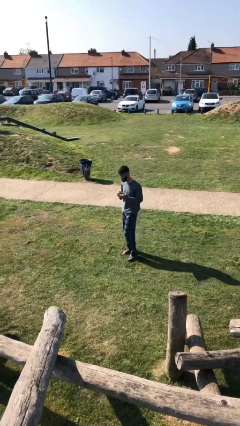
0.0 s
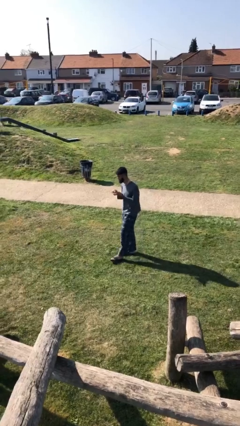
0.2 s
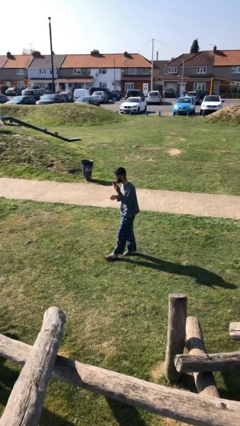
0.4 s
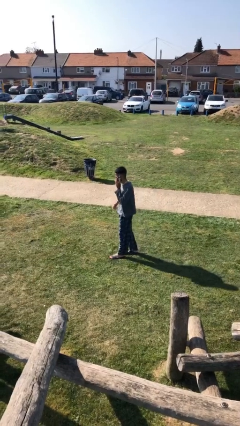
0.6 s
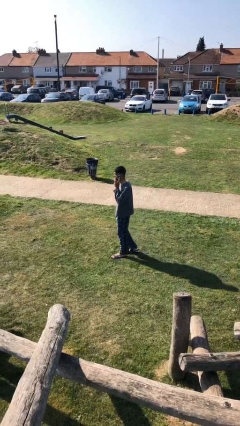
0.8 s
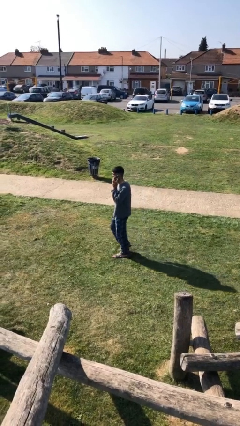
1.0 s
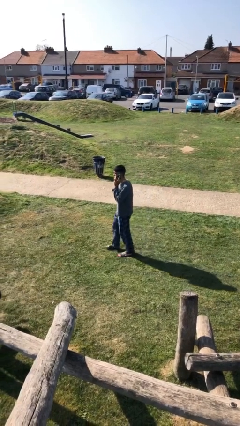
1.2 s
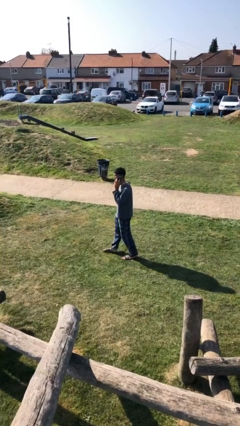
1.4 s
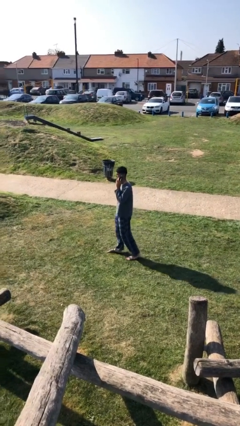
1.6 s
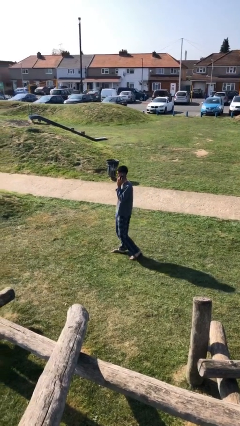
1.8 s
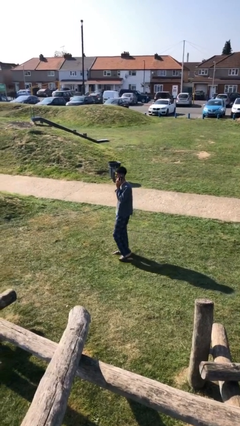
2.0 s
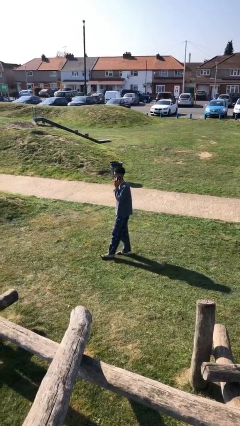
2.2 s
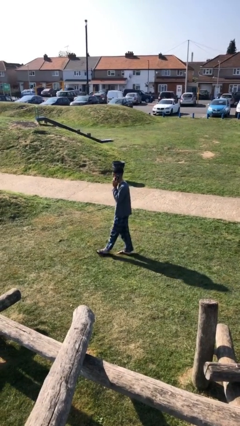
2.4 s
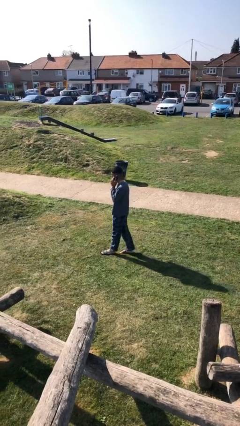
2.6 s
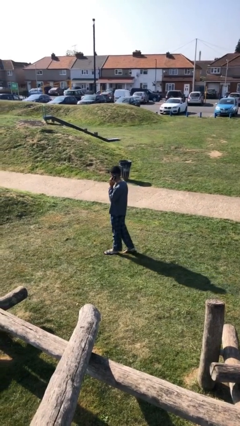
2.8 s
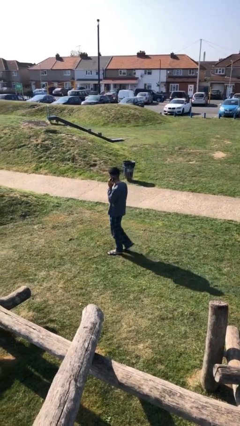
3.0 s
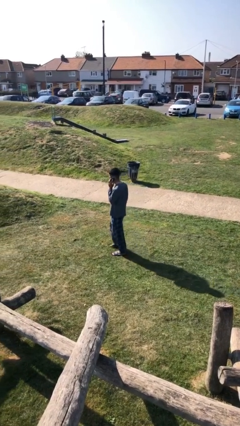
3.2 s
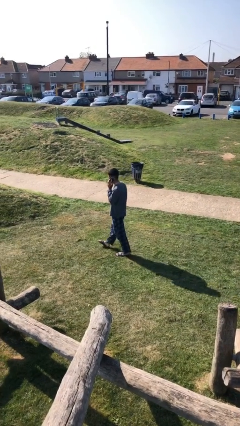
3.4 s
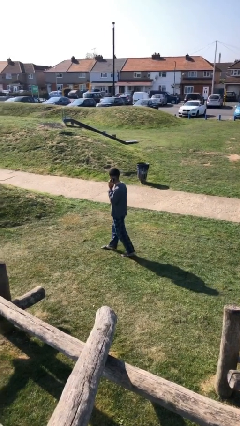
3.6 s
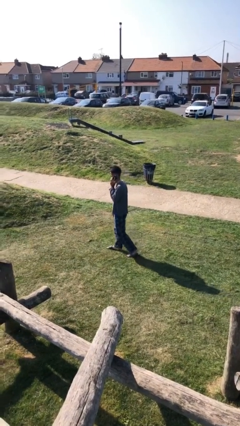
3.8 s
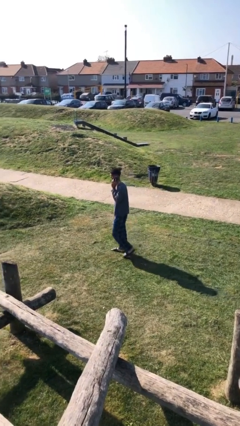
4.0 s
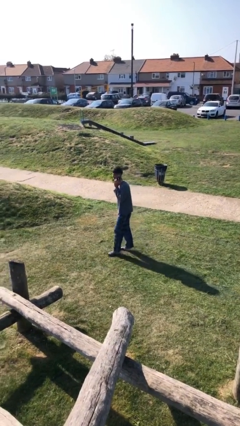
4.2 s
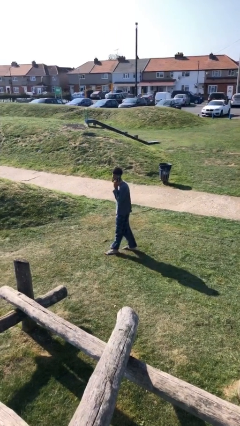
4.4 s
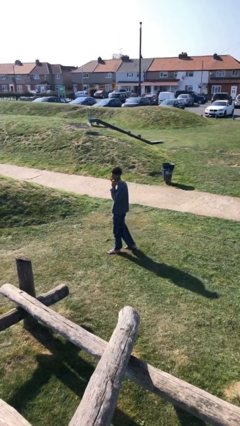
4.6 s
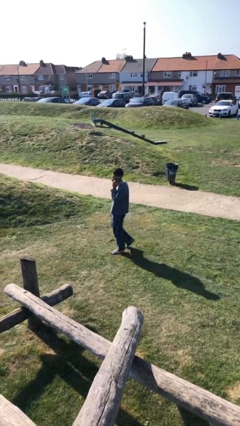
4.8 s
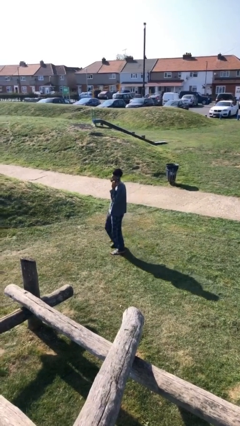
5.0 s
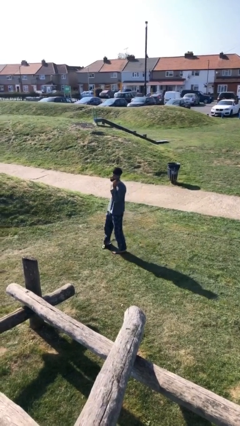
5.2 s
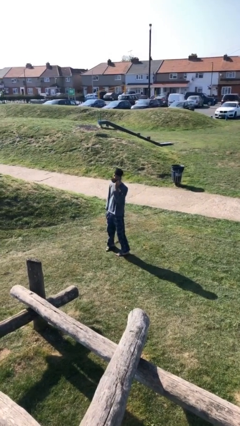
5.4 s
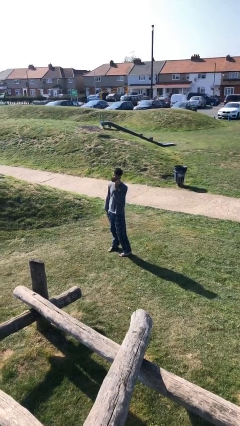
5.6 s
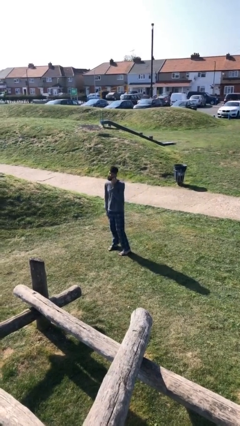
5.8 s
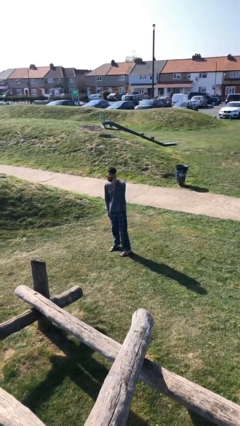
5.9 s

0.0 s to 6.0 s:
person talks on phone

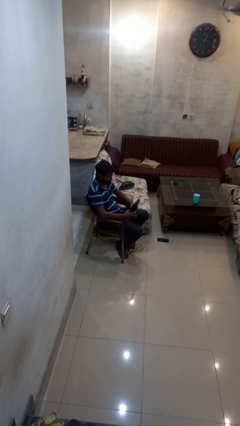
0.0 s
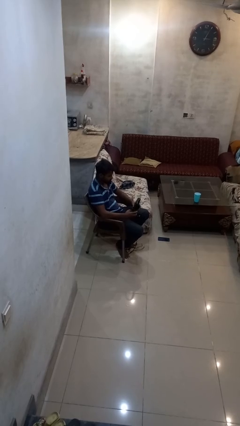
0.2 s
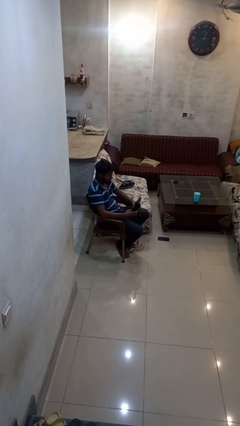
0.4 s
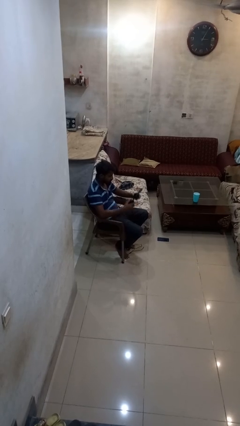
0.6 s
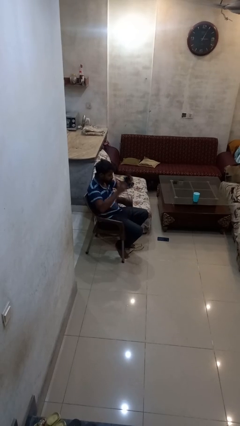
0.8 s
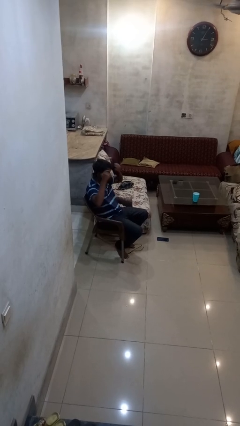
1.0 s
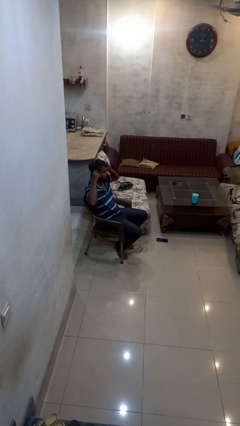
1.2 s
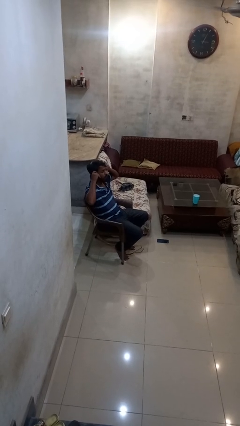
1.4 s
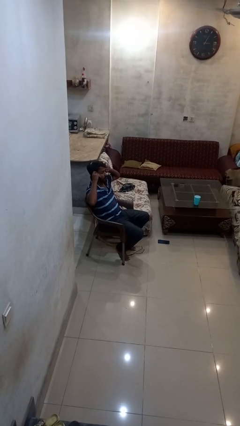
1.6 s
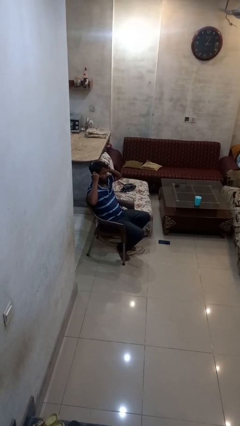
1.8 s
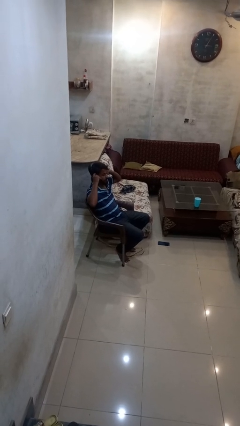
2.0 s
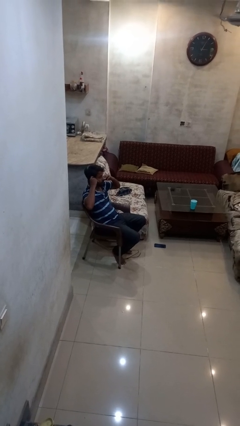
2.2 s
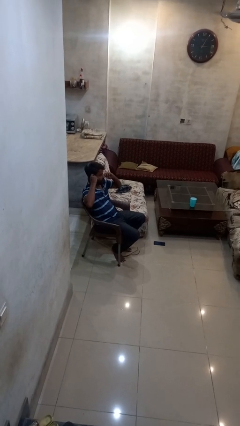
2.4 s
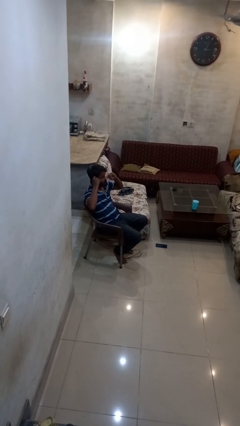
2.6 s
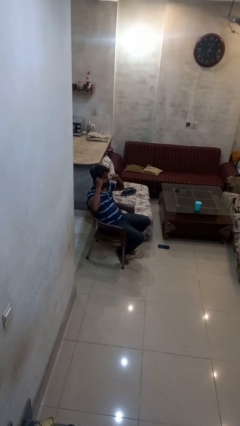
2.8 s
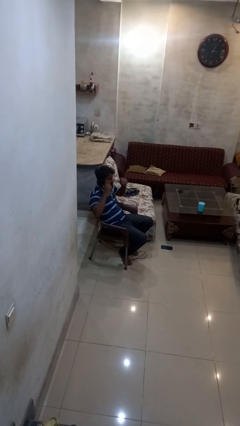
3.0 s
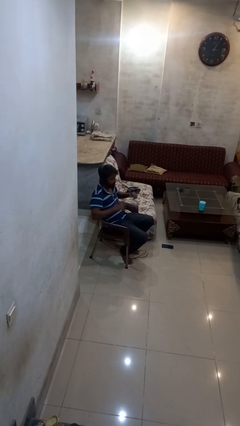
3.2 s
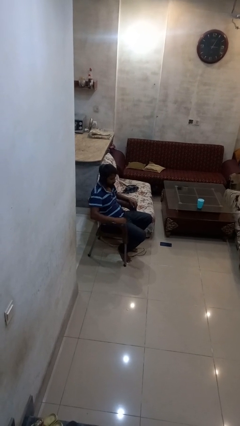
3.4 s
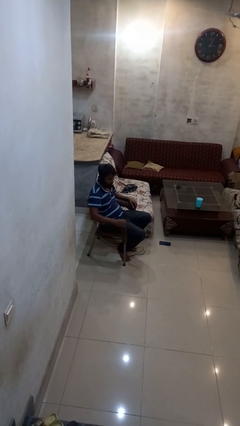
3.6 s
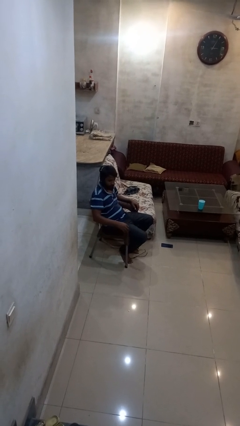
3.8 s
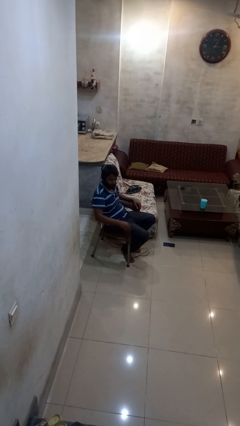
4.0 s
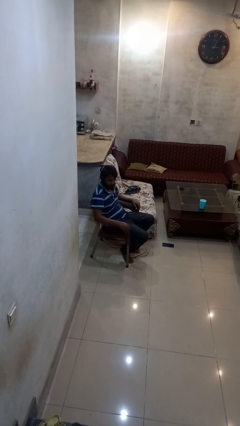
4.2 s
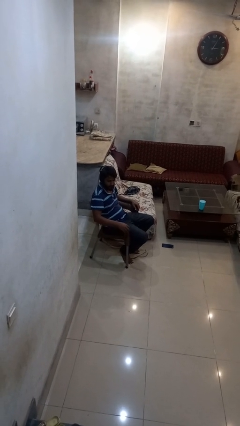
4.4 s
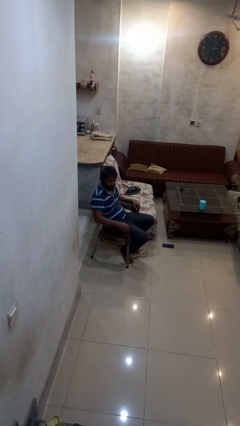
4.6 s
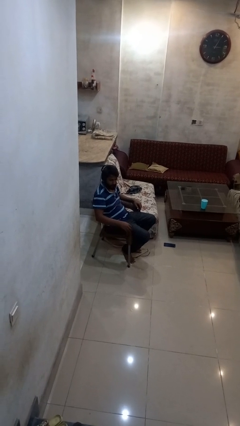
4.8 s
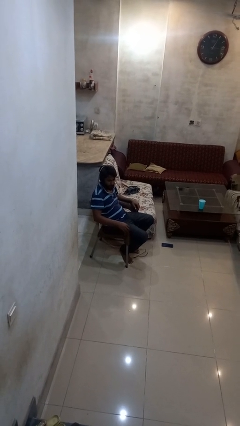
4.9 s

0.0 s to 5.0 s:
person puts on headphones

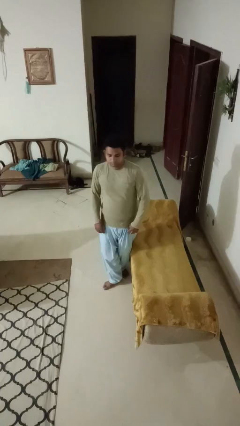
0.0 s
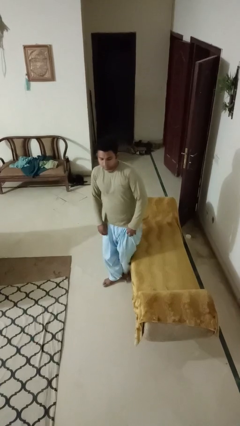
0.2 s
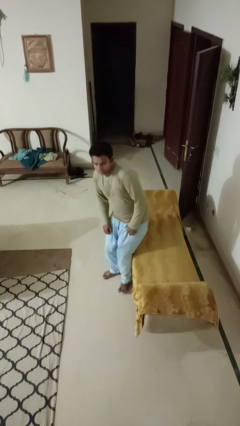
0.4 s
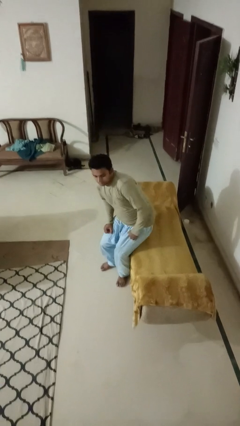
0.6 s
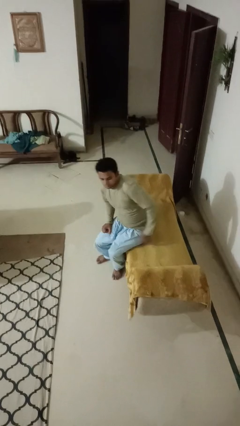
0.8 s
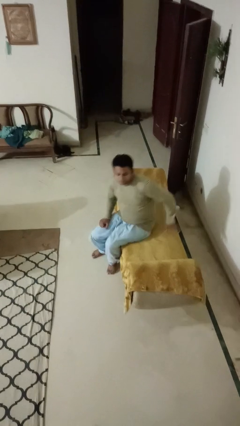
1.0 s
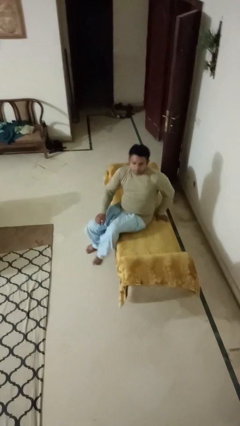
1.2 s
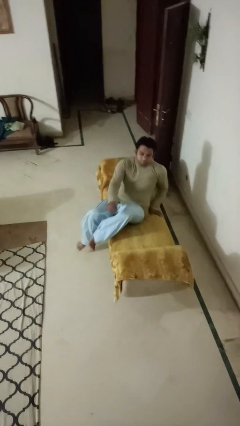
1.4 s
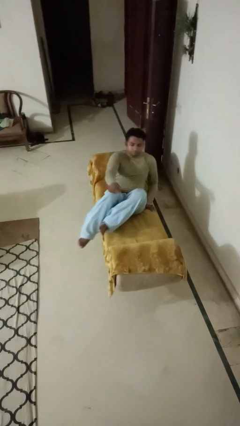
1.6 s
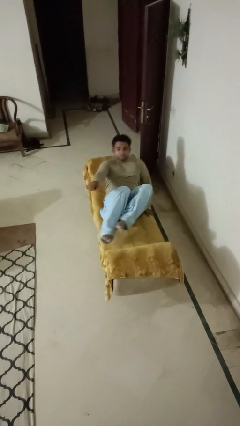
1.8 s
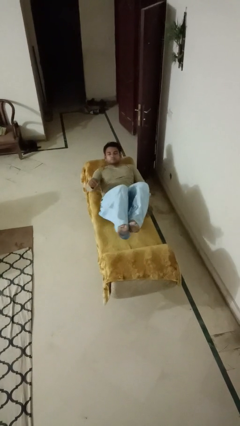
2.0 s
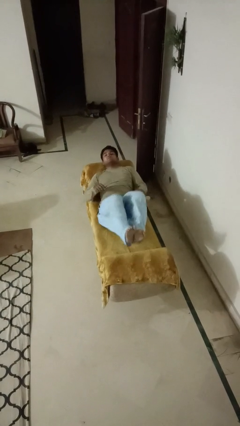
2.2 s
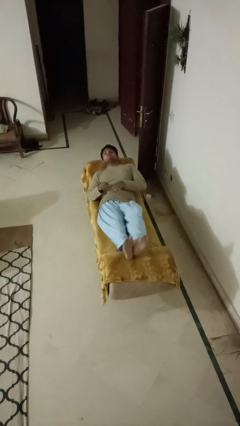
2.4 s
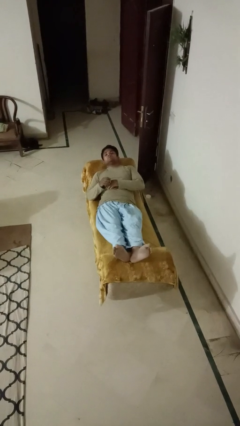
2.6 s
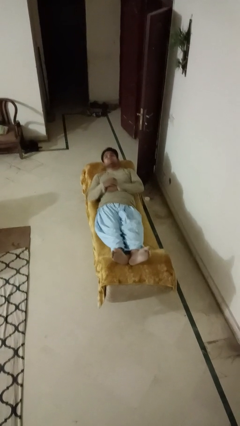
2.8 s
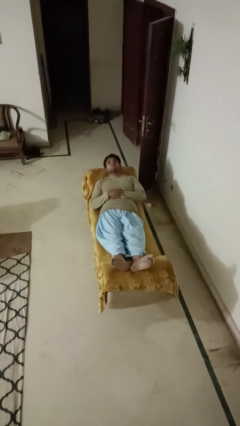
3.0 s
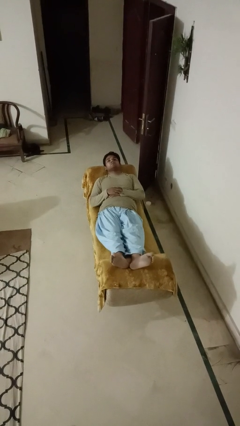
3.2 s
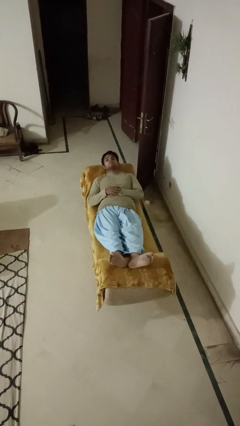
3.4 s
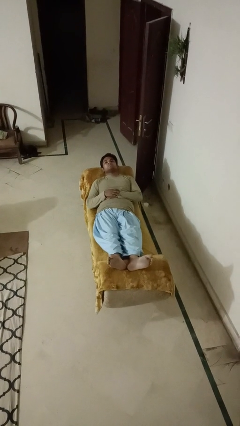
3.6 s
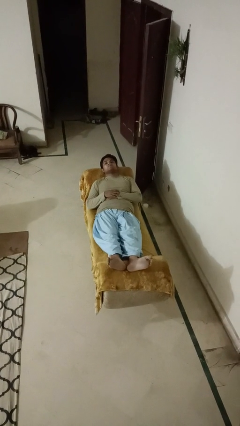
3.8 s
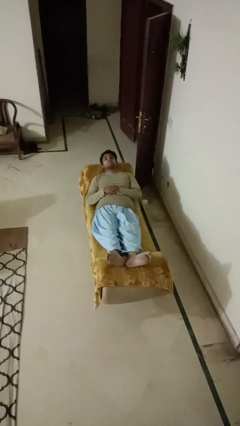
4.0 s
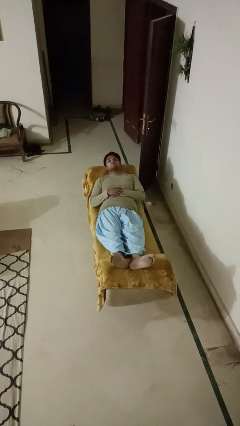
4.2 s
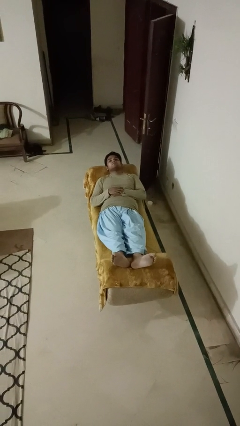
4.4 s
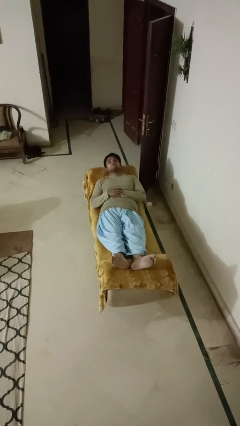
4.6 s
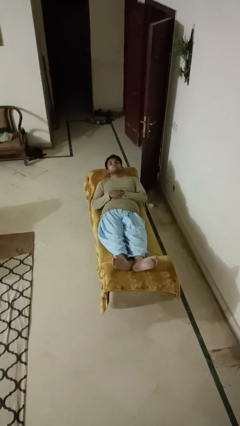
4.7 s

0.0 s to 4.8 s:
person lies down on couch

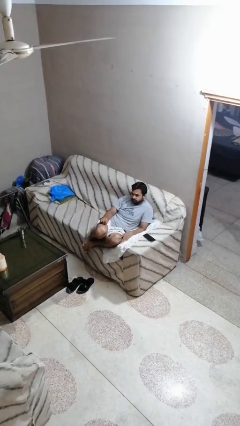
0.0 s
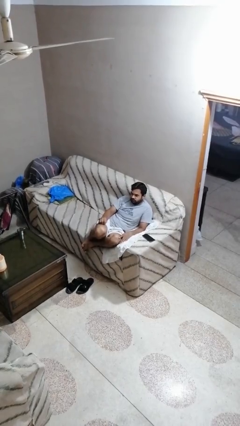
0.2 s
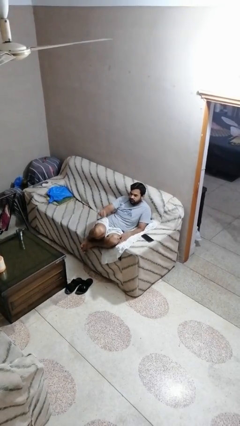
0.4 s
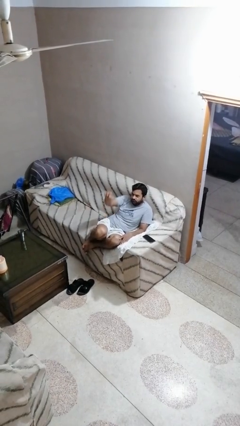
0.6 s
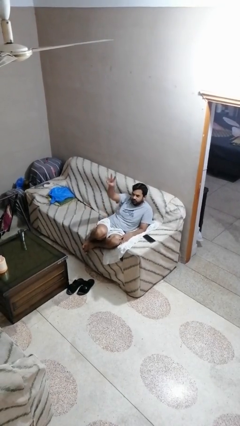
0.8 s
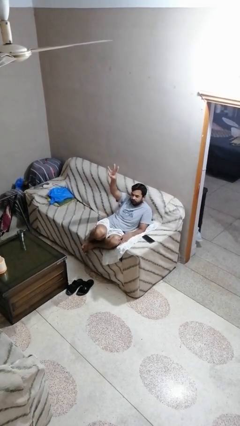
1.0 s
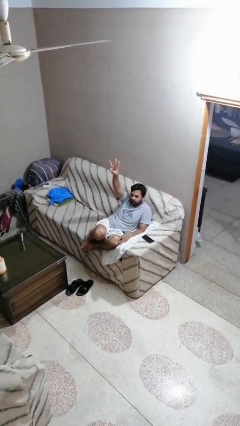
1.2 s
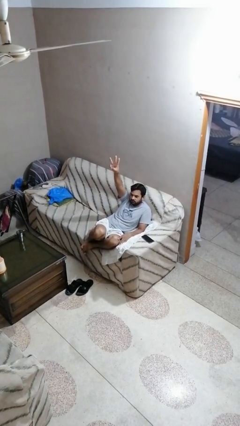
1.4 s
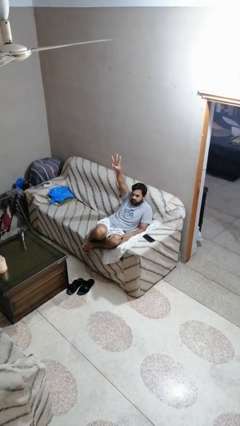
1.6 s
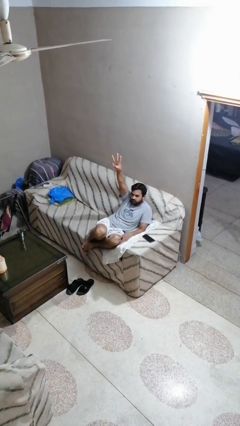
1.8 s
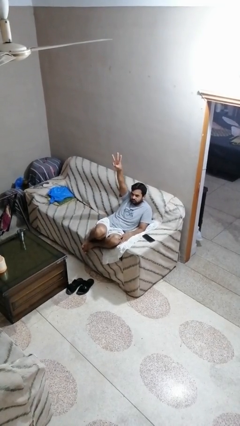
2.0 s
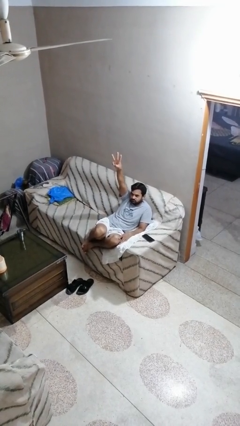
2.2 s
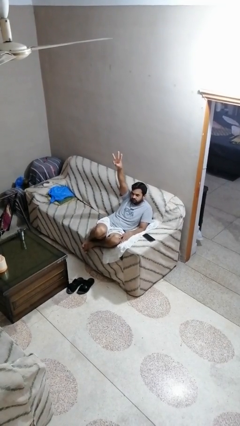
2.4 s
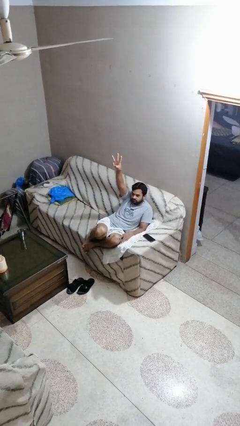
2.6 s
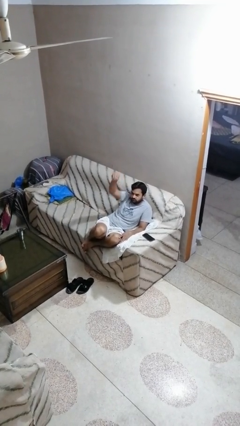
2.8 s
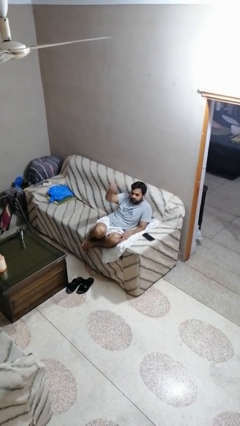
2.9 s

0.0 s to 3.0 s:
person gestures number three
